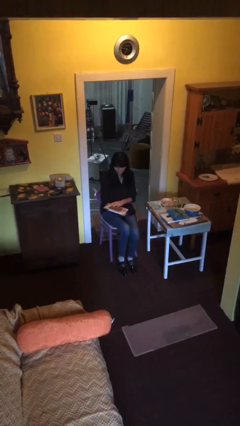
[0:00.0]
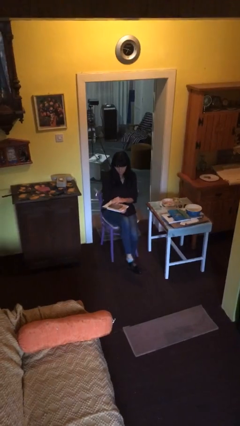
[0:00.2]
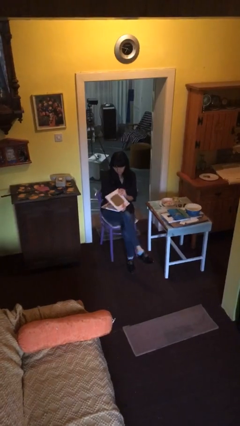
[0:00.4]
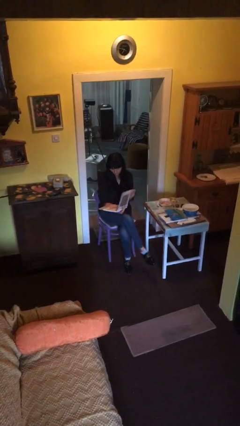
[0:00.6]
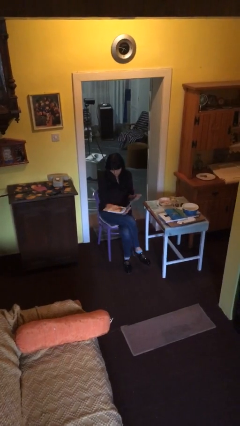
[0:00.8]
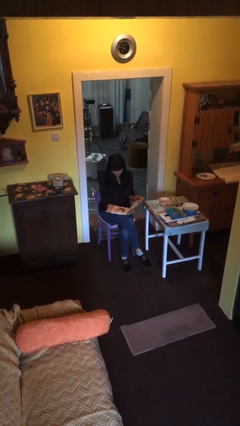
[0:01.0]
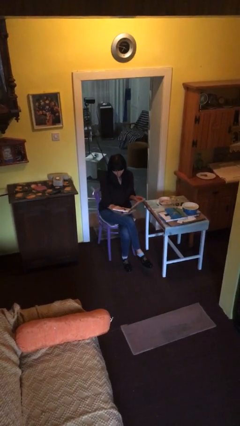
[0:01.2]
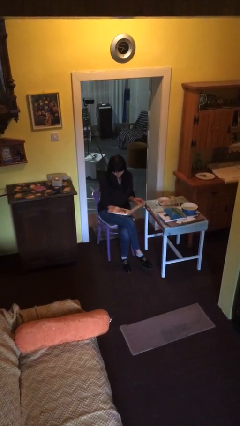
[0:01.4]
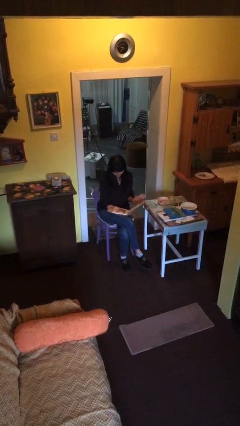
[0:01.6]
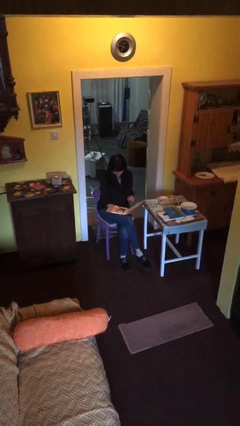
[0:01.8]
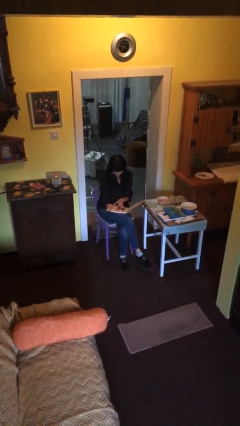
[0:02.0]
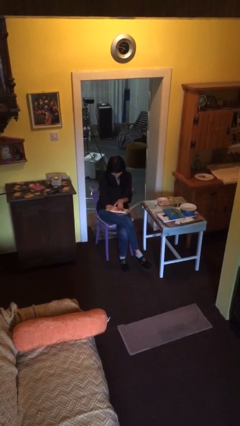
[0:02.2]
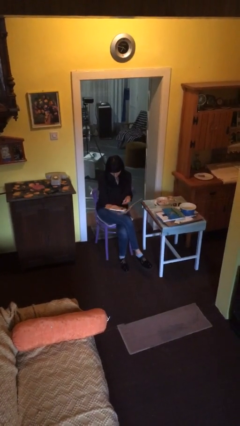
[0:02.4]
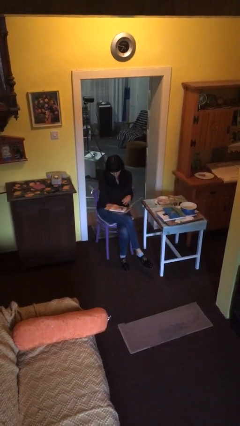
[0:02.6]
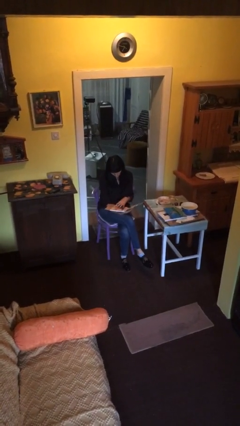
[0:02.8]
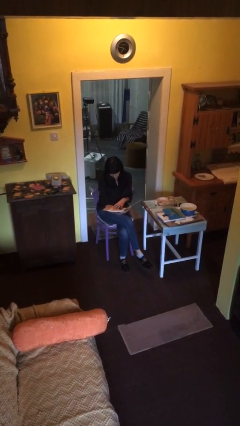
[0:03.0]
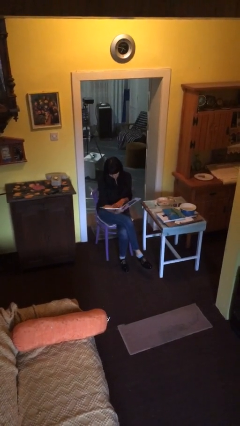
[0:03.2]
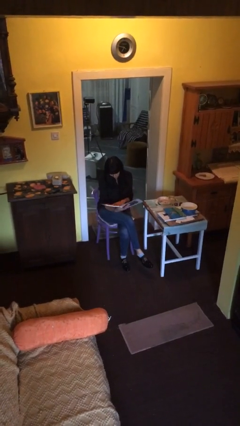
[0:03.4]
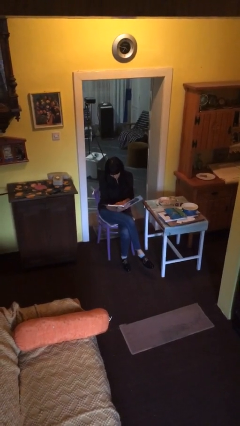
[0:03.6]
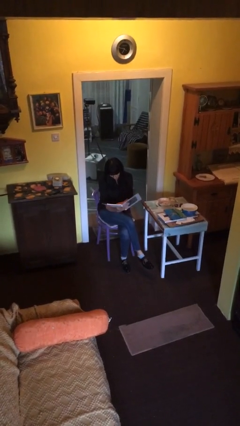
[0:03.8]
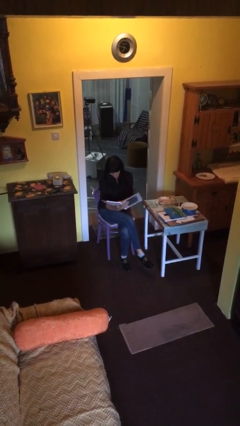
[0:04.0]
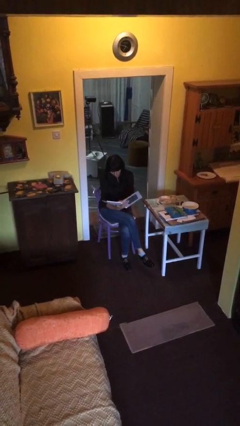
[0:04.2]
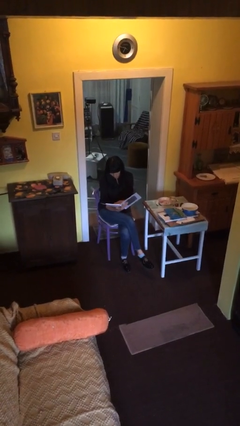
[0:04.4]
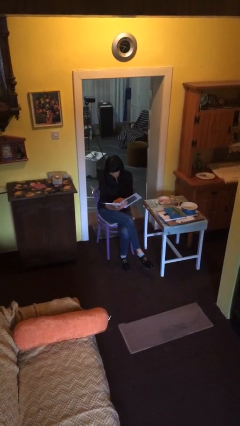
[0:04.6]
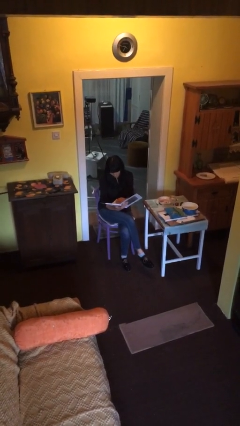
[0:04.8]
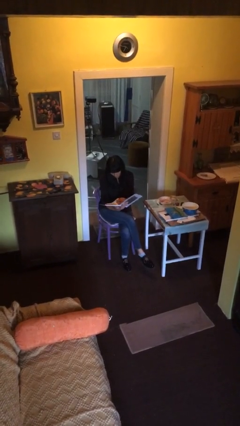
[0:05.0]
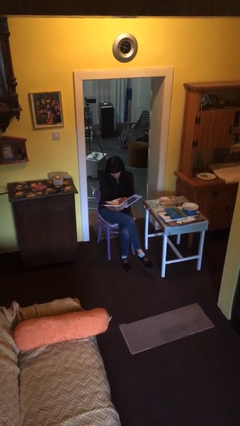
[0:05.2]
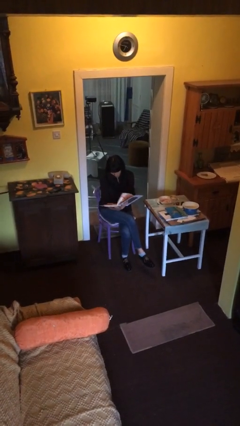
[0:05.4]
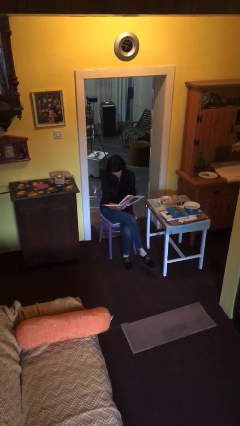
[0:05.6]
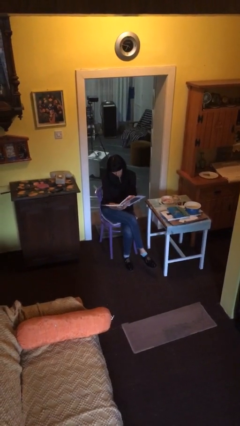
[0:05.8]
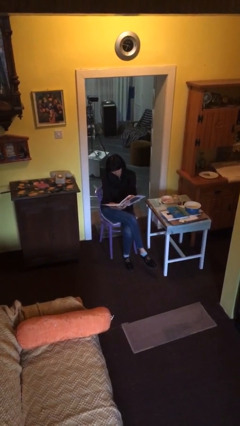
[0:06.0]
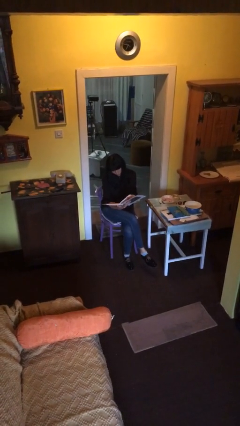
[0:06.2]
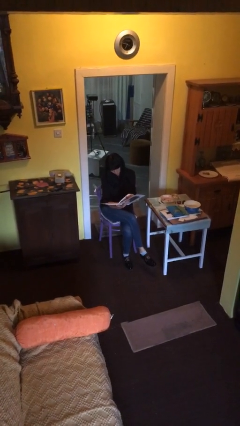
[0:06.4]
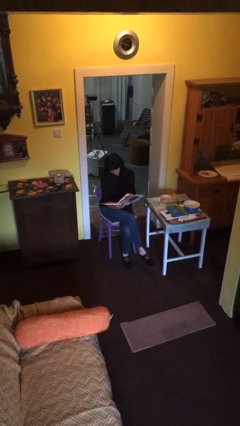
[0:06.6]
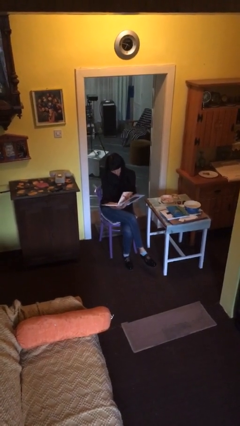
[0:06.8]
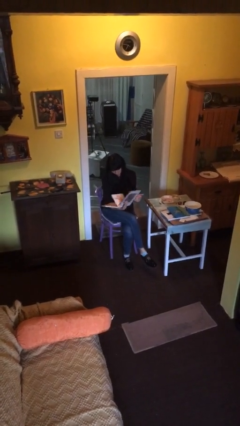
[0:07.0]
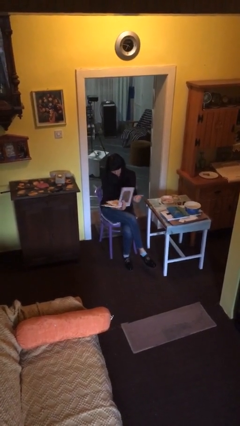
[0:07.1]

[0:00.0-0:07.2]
person reads document

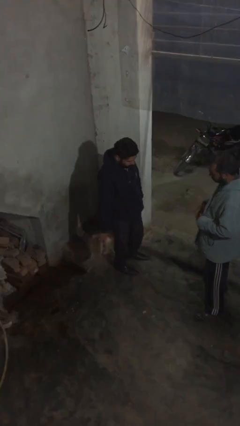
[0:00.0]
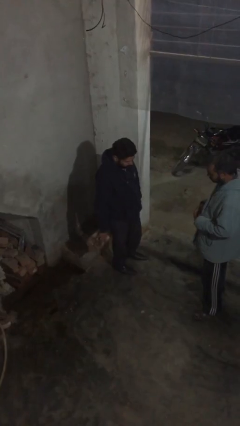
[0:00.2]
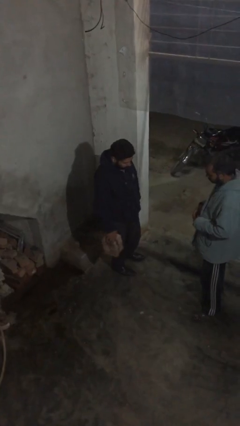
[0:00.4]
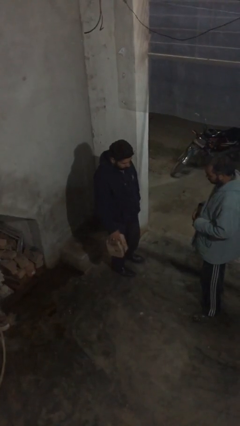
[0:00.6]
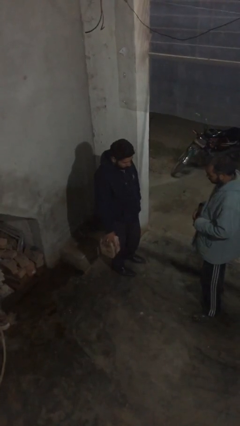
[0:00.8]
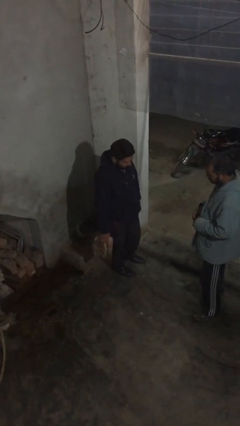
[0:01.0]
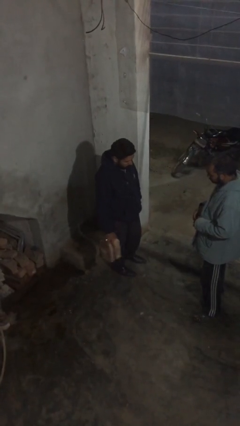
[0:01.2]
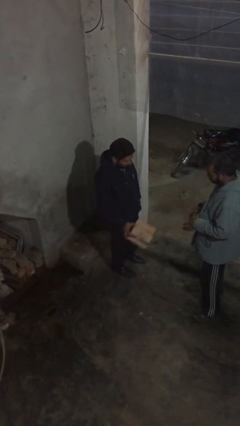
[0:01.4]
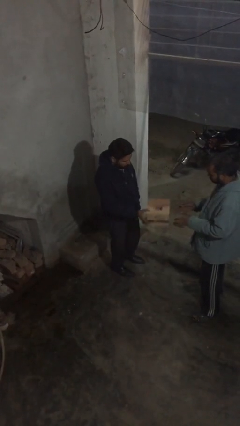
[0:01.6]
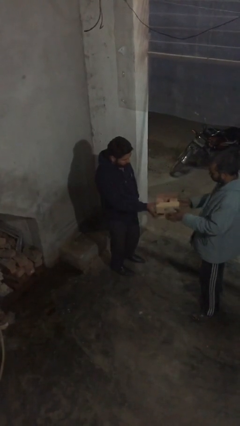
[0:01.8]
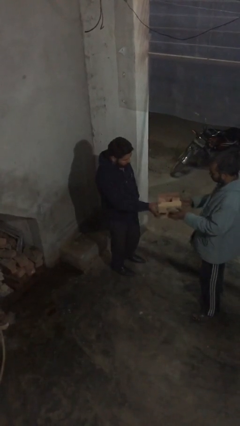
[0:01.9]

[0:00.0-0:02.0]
person transfers object to person

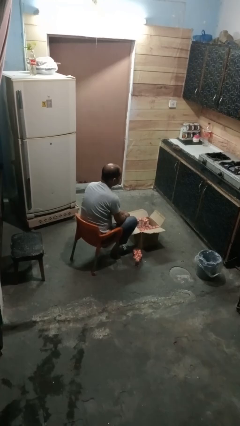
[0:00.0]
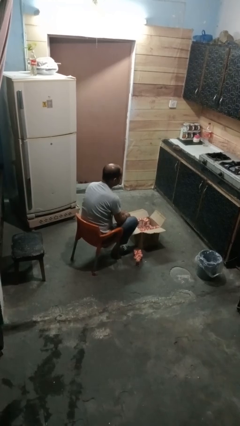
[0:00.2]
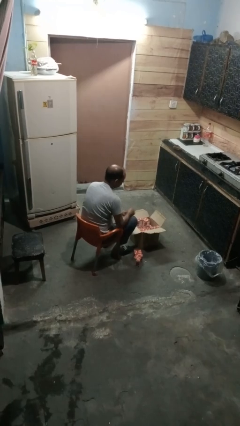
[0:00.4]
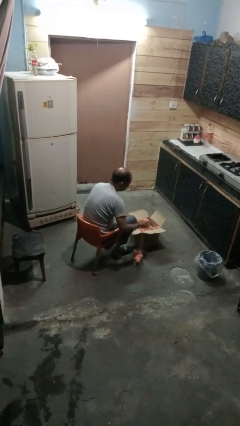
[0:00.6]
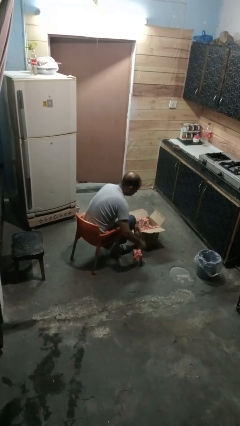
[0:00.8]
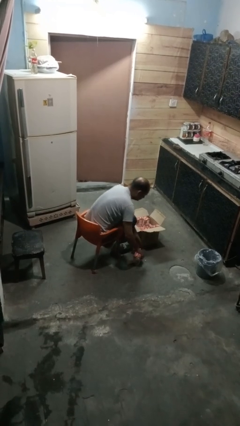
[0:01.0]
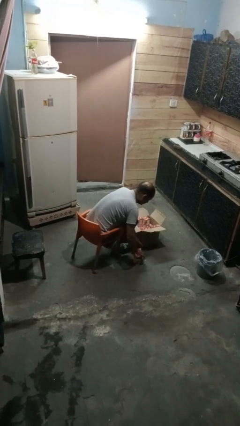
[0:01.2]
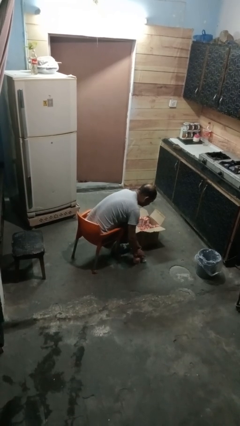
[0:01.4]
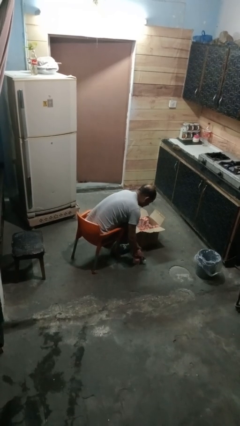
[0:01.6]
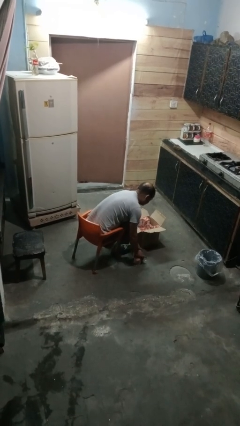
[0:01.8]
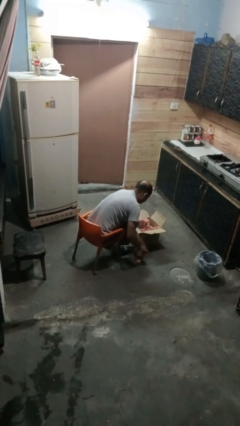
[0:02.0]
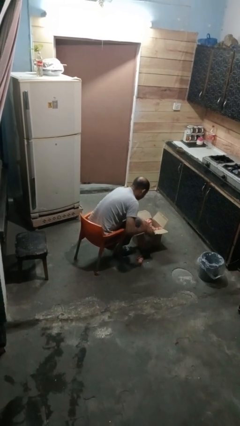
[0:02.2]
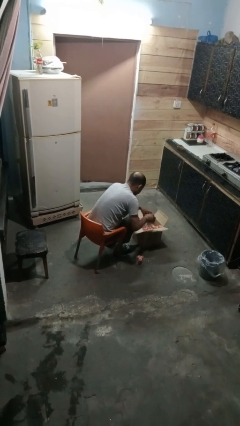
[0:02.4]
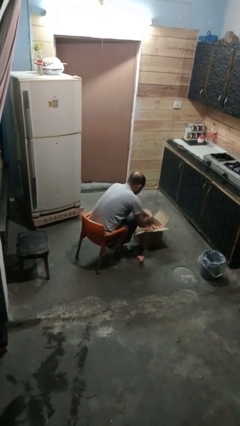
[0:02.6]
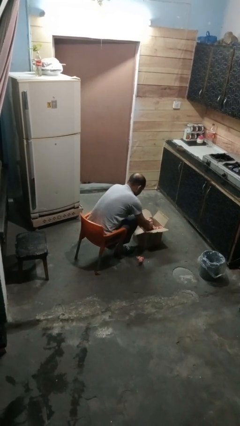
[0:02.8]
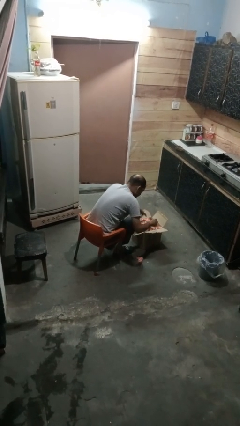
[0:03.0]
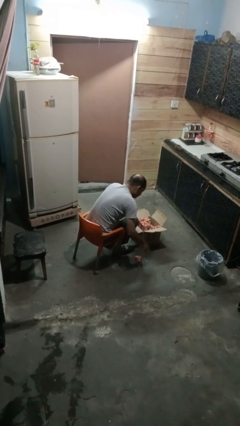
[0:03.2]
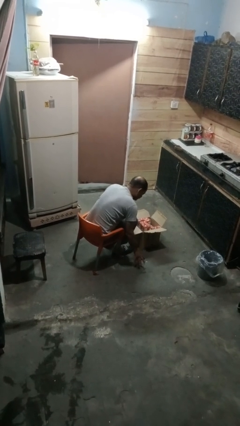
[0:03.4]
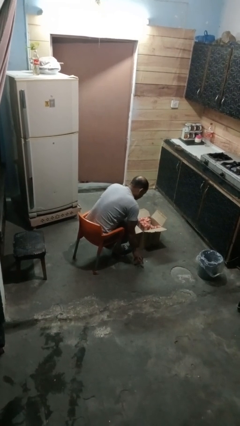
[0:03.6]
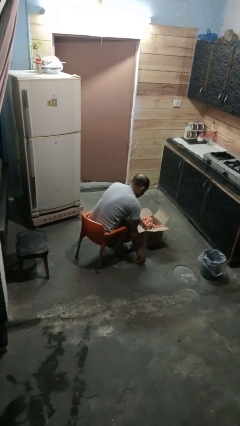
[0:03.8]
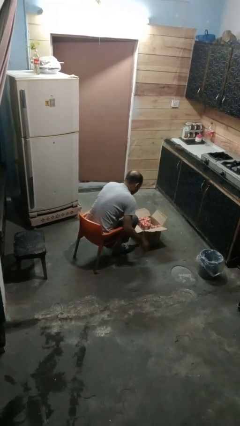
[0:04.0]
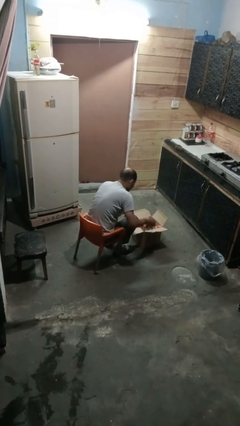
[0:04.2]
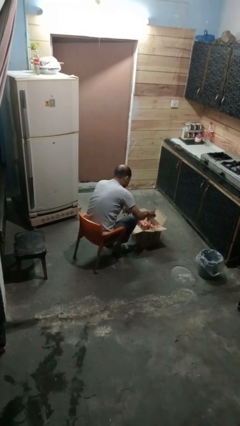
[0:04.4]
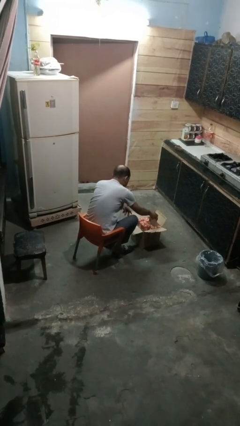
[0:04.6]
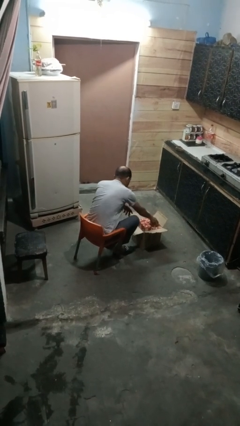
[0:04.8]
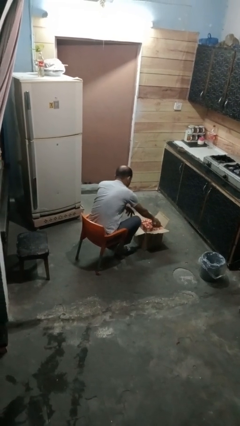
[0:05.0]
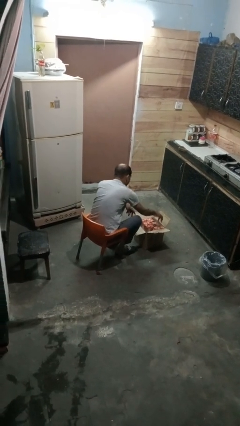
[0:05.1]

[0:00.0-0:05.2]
person puts object into box

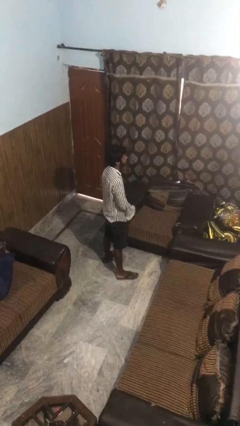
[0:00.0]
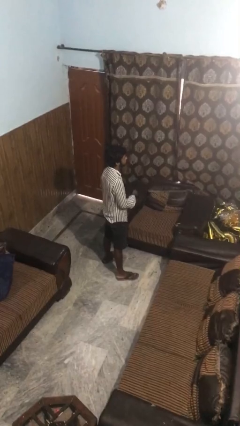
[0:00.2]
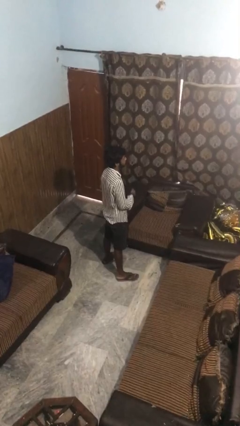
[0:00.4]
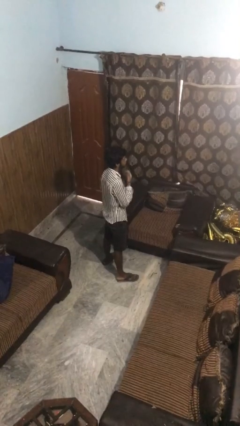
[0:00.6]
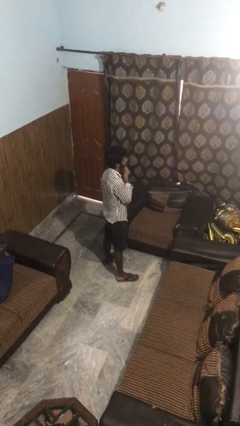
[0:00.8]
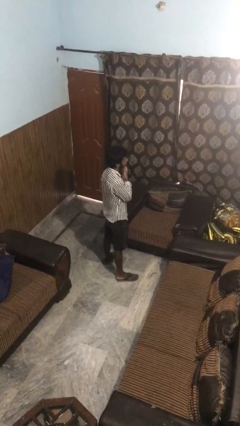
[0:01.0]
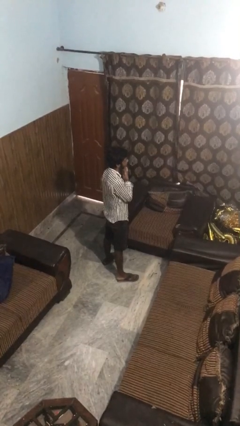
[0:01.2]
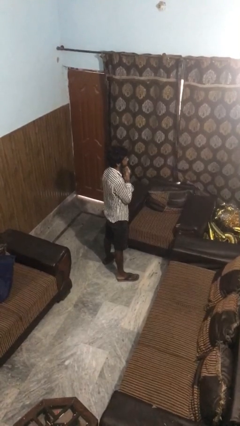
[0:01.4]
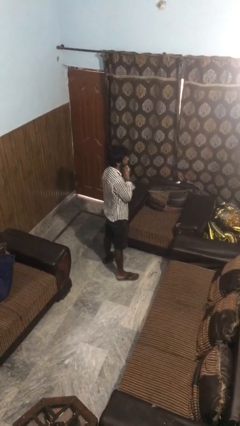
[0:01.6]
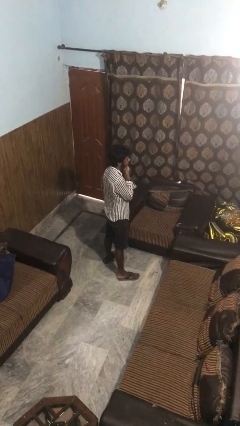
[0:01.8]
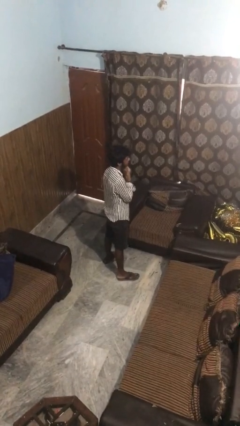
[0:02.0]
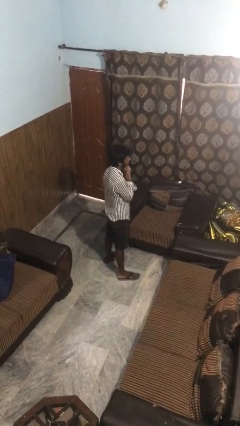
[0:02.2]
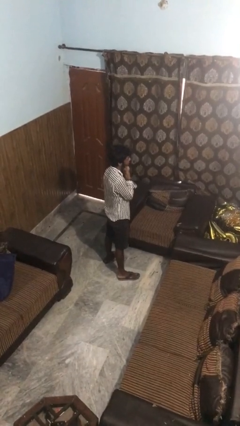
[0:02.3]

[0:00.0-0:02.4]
person strokes chin

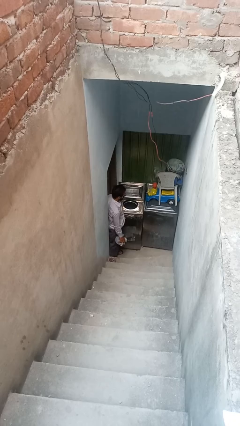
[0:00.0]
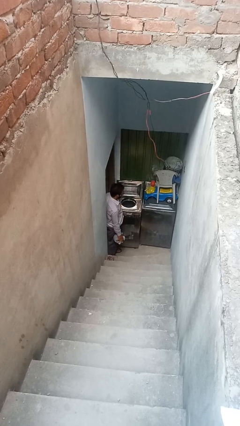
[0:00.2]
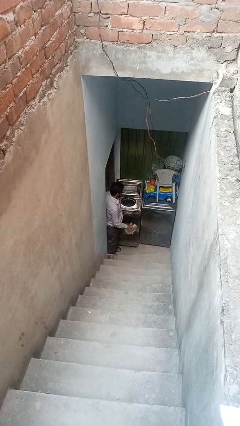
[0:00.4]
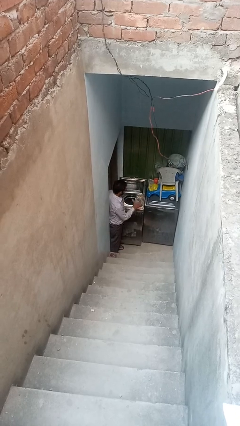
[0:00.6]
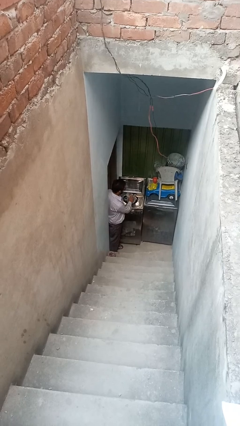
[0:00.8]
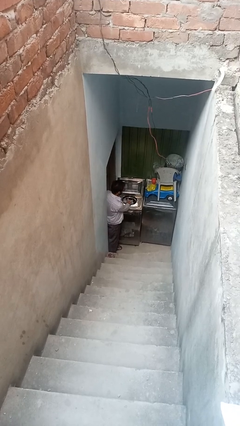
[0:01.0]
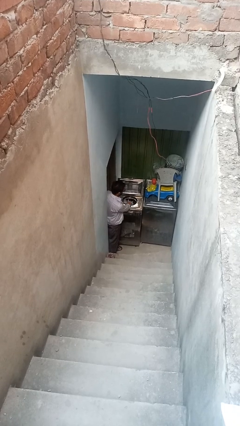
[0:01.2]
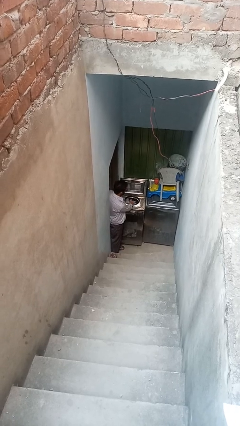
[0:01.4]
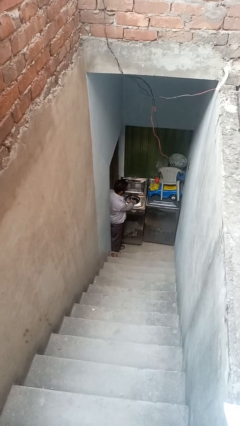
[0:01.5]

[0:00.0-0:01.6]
person loads clotheswasher
